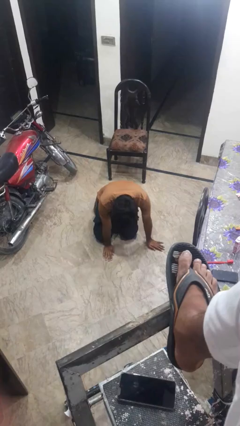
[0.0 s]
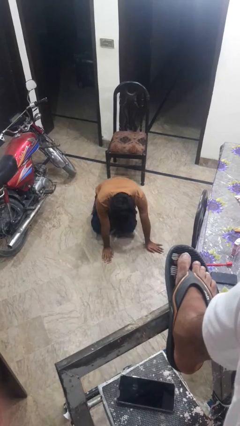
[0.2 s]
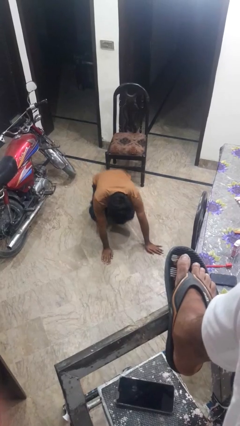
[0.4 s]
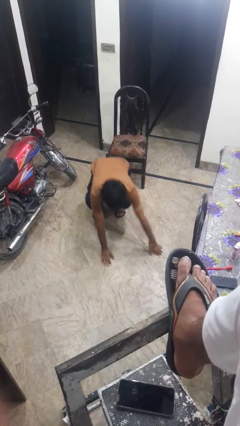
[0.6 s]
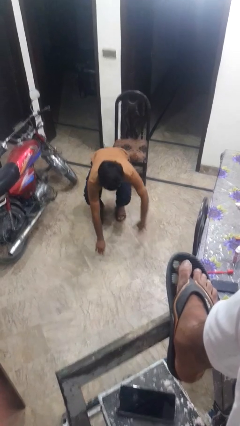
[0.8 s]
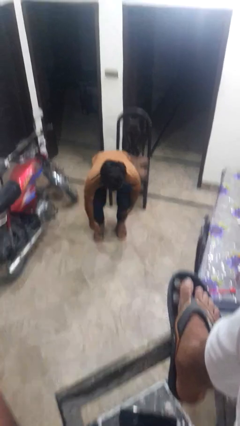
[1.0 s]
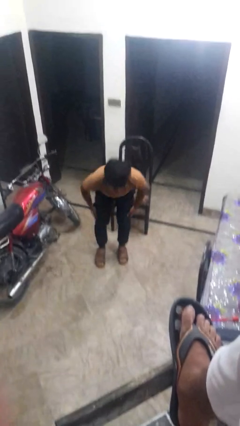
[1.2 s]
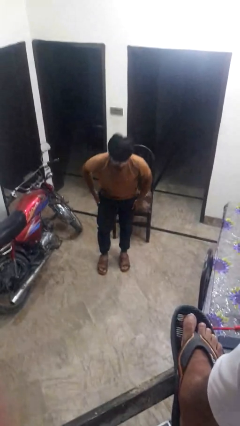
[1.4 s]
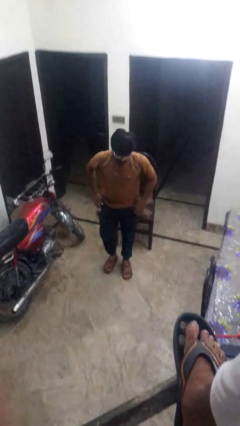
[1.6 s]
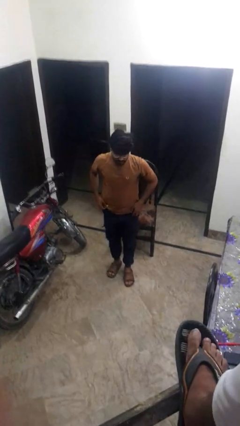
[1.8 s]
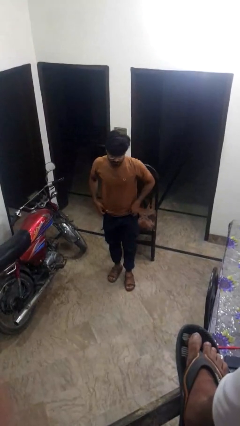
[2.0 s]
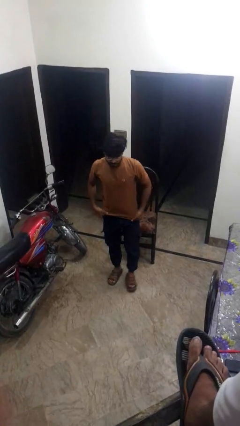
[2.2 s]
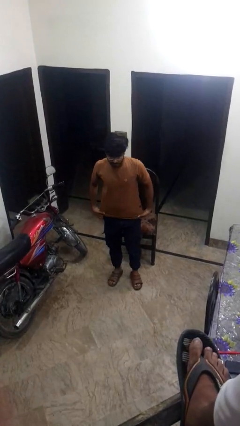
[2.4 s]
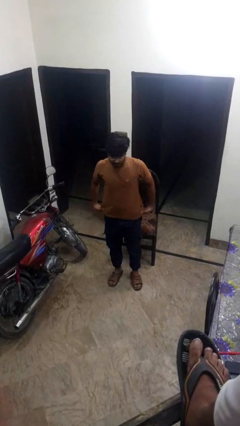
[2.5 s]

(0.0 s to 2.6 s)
person stands up from floor

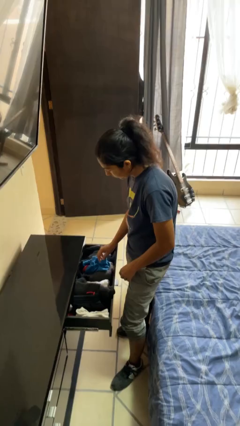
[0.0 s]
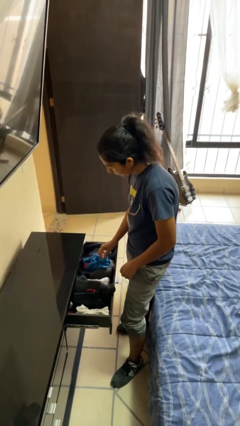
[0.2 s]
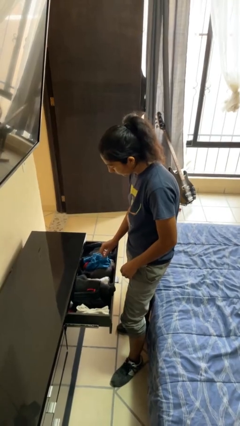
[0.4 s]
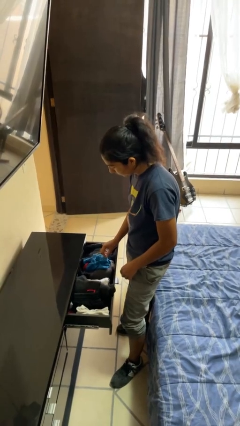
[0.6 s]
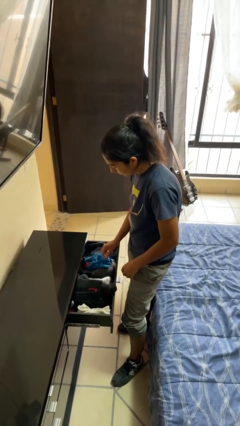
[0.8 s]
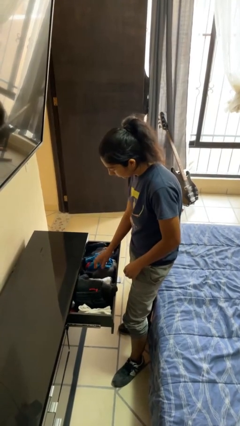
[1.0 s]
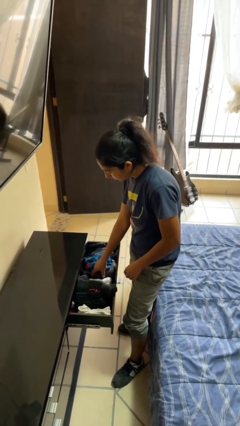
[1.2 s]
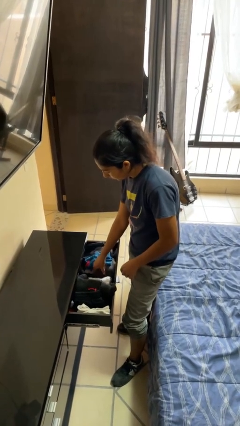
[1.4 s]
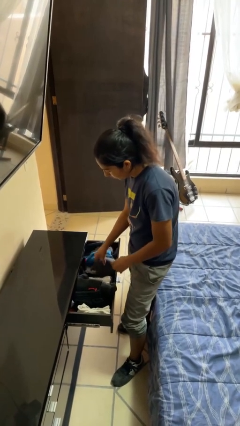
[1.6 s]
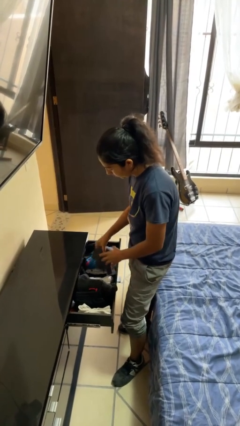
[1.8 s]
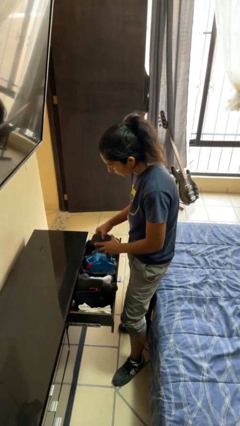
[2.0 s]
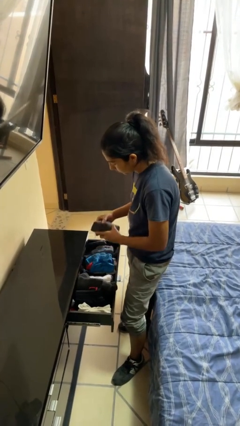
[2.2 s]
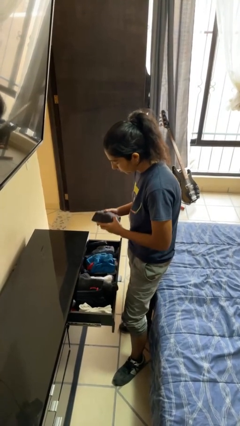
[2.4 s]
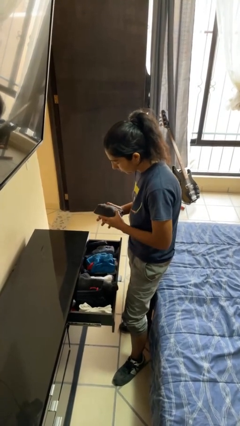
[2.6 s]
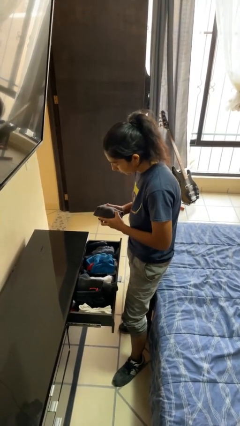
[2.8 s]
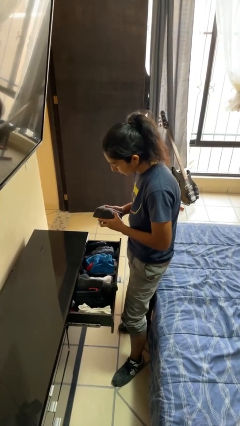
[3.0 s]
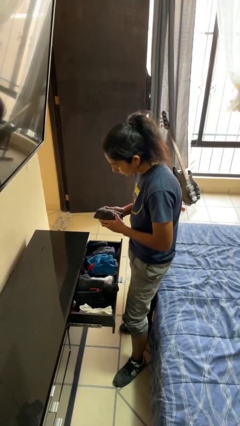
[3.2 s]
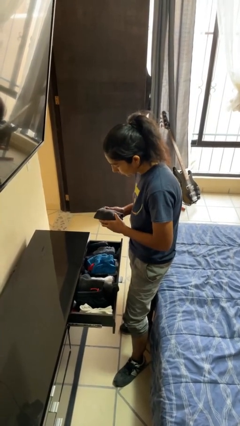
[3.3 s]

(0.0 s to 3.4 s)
person takes clothes from dresser

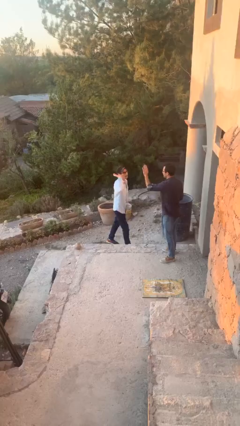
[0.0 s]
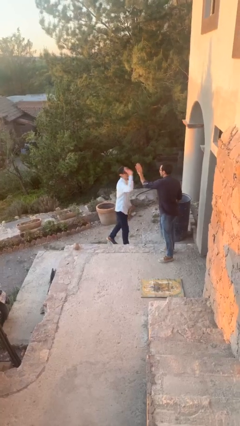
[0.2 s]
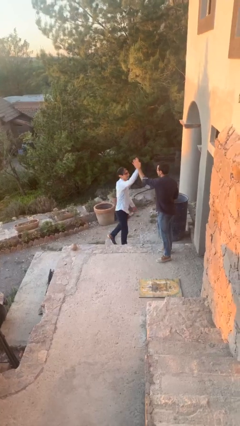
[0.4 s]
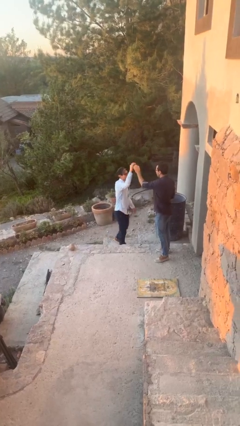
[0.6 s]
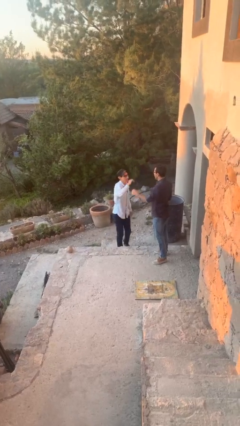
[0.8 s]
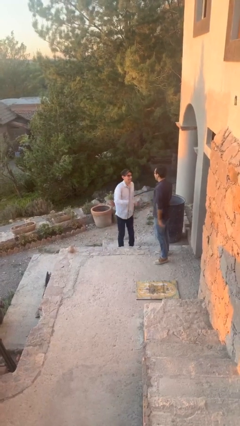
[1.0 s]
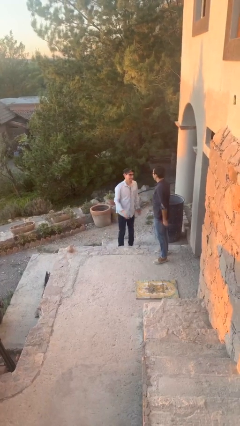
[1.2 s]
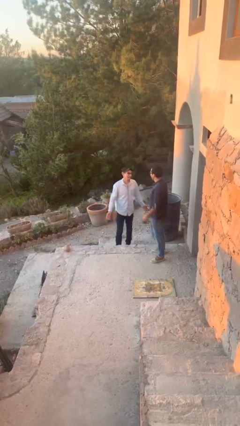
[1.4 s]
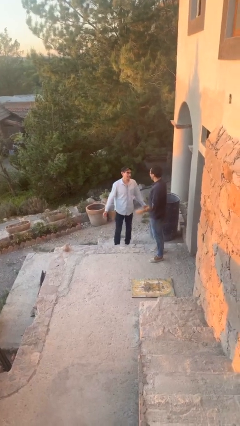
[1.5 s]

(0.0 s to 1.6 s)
person highfives hand

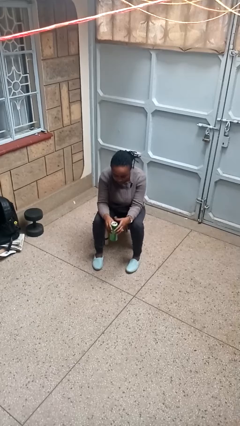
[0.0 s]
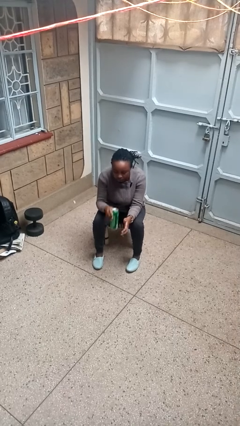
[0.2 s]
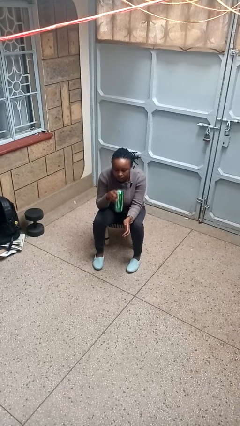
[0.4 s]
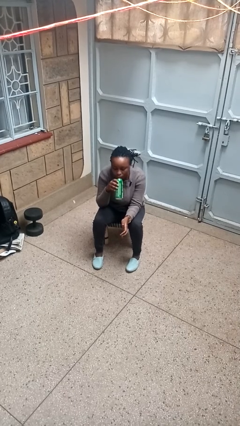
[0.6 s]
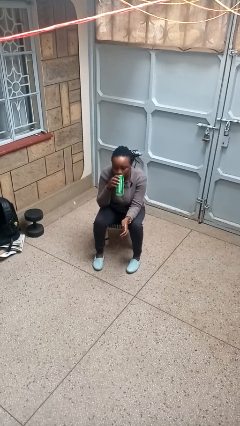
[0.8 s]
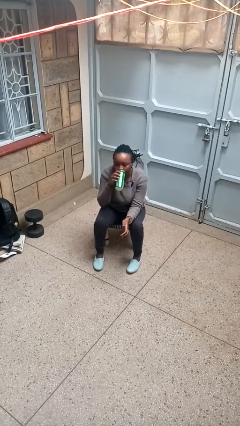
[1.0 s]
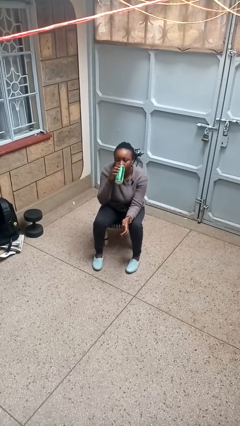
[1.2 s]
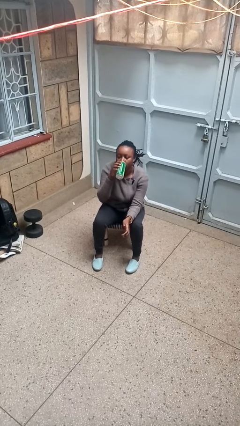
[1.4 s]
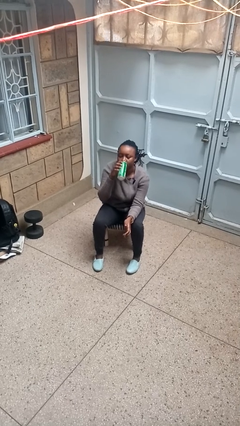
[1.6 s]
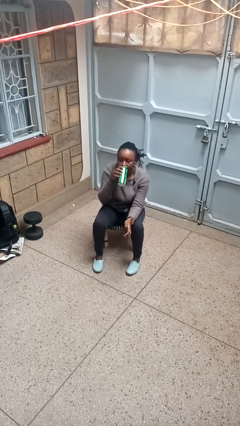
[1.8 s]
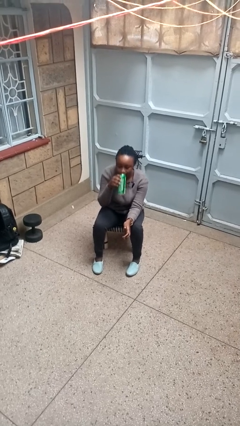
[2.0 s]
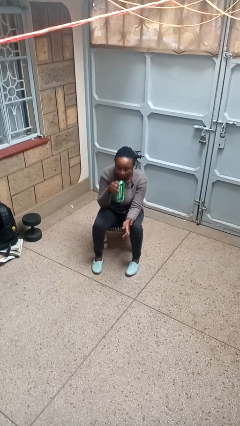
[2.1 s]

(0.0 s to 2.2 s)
person drinks from beverage can

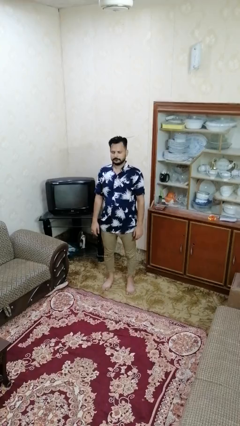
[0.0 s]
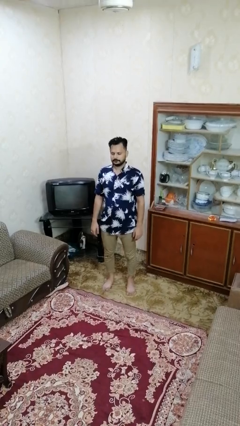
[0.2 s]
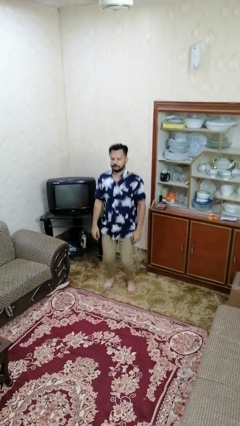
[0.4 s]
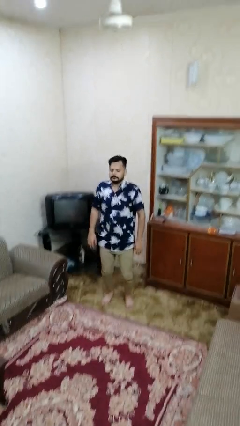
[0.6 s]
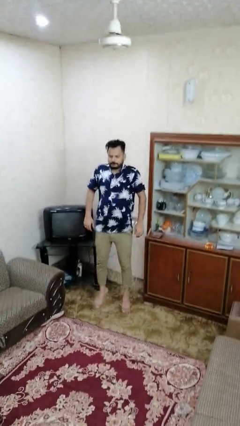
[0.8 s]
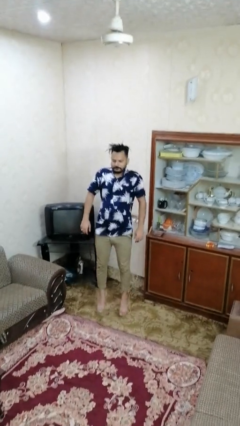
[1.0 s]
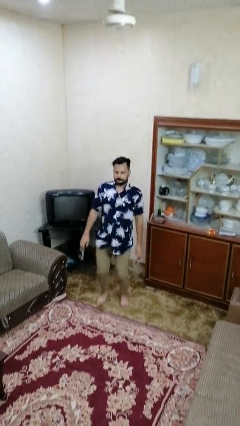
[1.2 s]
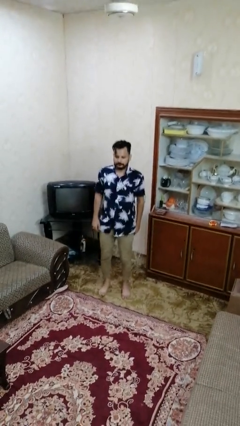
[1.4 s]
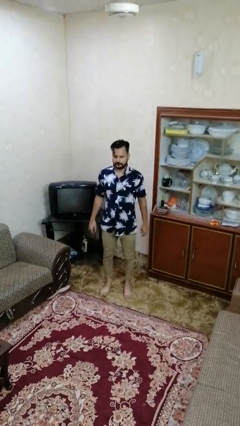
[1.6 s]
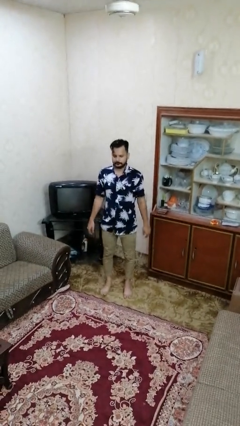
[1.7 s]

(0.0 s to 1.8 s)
person jumps

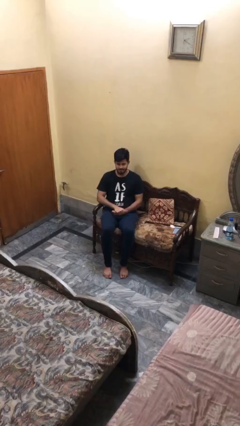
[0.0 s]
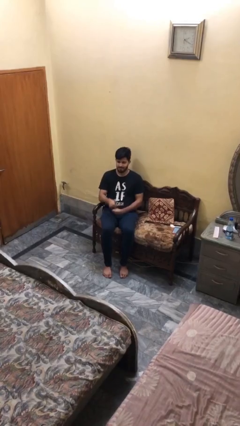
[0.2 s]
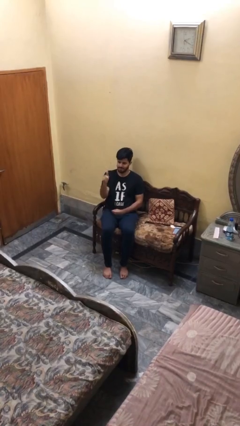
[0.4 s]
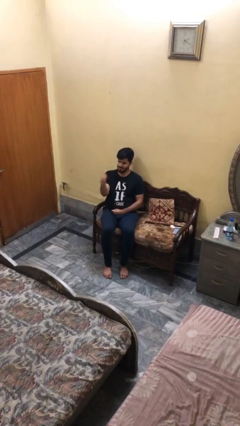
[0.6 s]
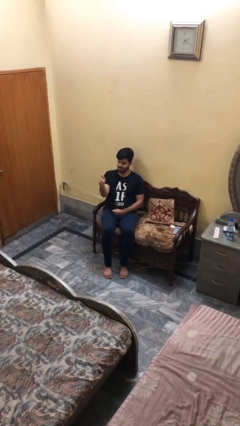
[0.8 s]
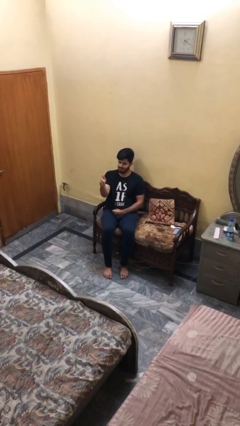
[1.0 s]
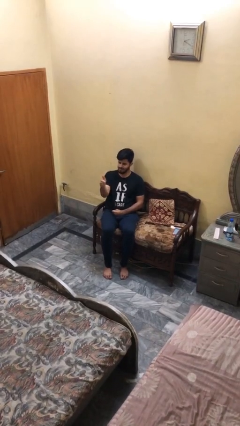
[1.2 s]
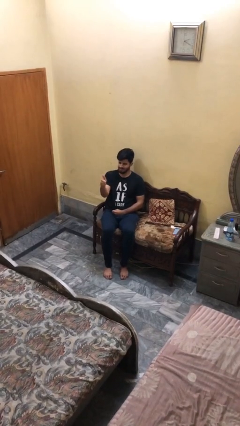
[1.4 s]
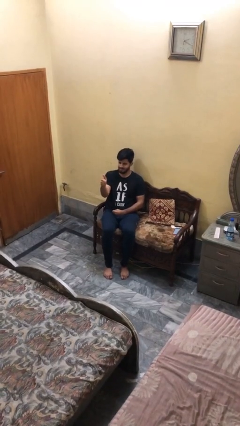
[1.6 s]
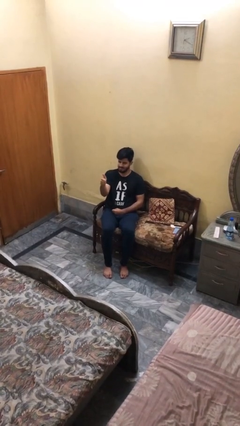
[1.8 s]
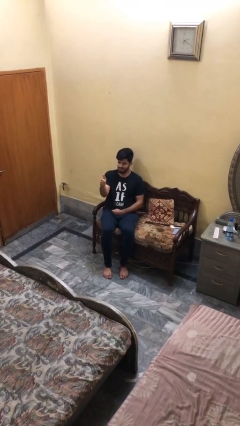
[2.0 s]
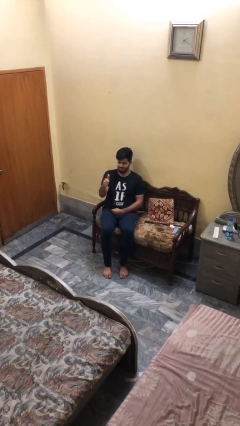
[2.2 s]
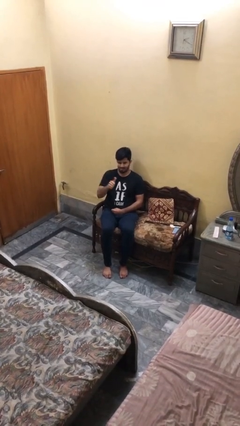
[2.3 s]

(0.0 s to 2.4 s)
person gestures thumbs up

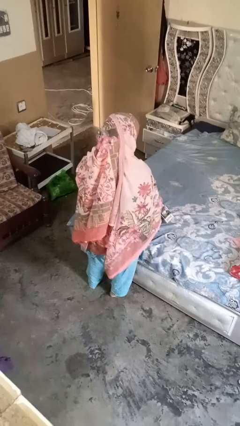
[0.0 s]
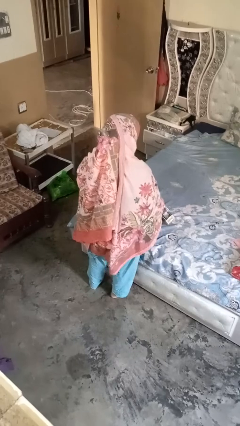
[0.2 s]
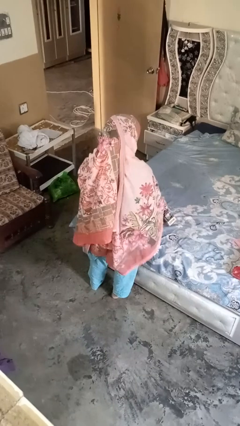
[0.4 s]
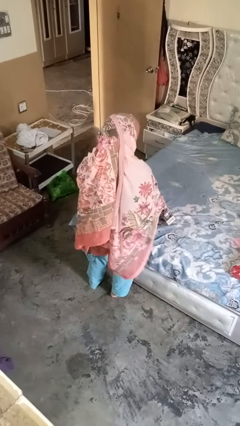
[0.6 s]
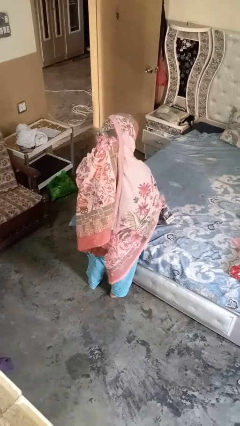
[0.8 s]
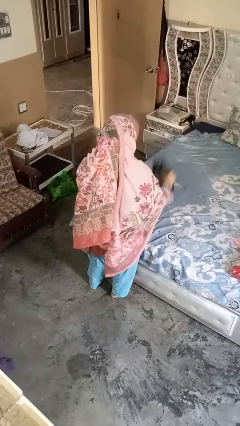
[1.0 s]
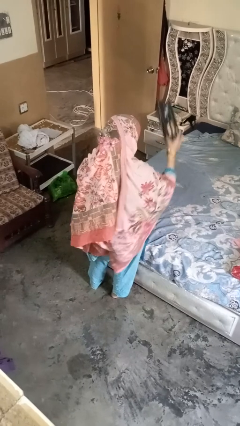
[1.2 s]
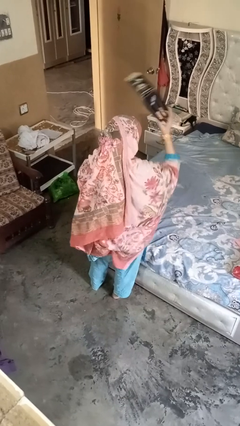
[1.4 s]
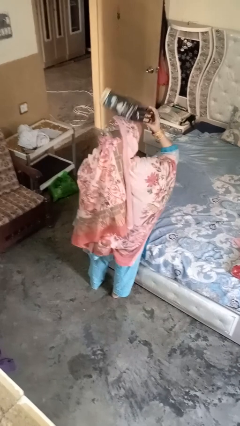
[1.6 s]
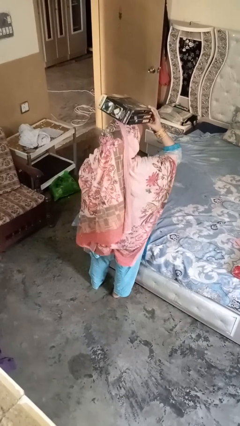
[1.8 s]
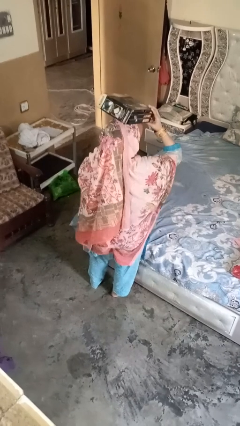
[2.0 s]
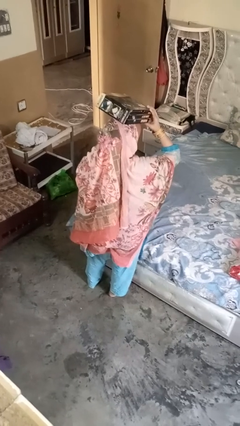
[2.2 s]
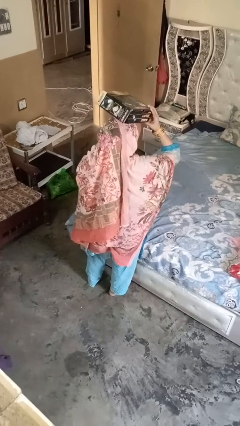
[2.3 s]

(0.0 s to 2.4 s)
person holds object above head

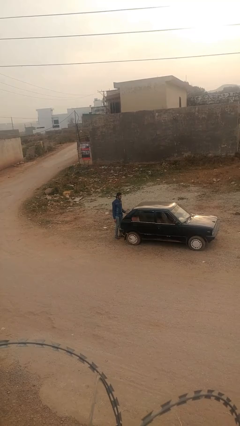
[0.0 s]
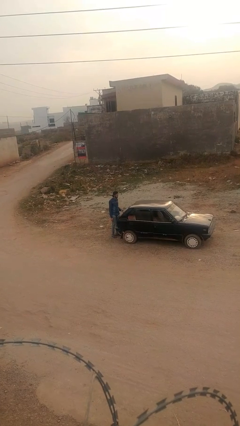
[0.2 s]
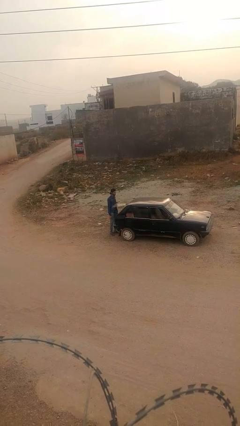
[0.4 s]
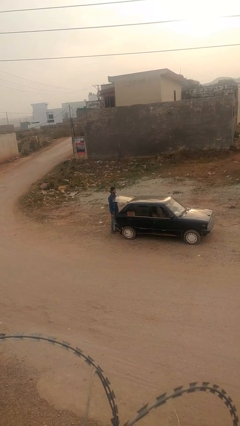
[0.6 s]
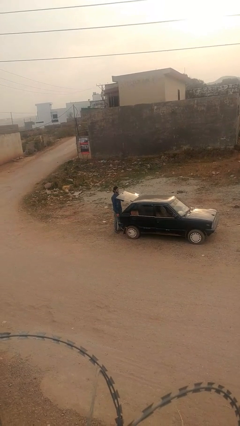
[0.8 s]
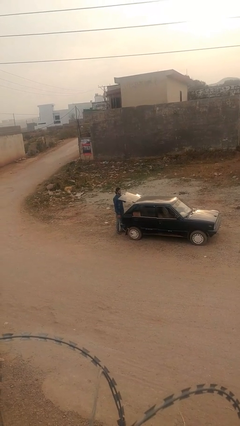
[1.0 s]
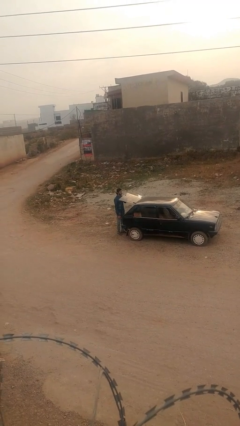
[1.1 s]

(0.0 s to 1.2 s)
person opens car trunk
